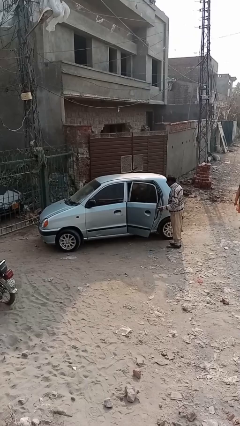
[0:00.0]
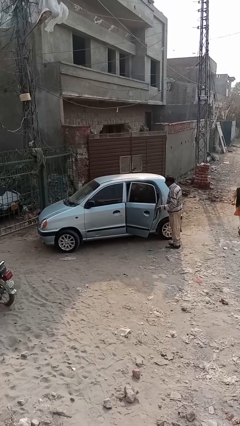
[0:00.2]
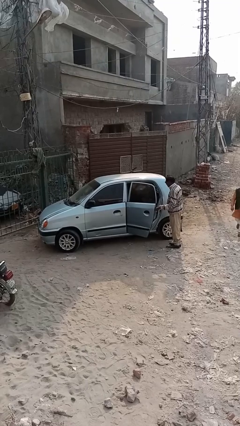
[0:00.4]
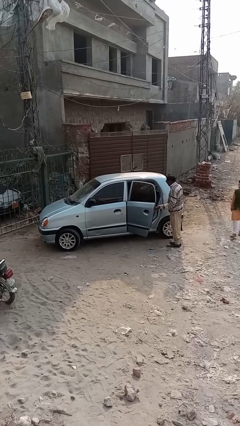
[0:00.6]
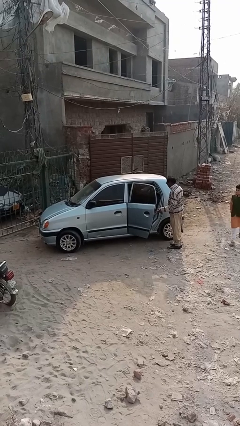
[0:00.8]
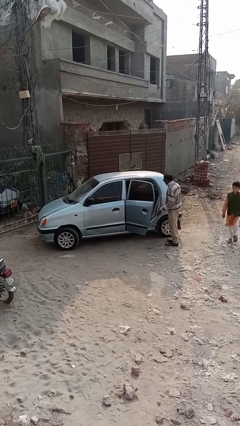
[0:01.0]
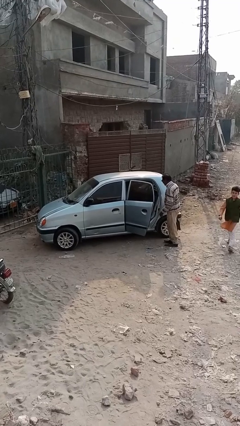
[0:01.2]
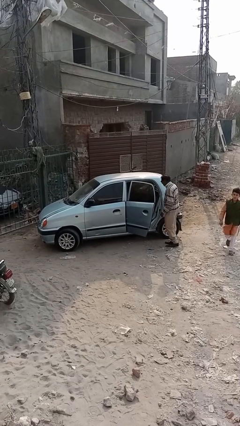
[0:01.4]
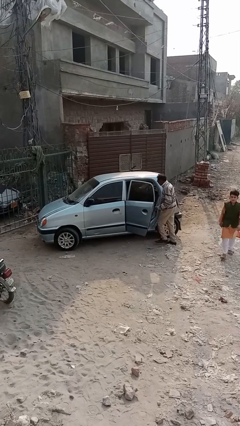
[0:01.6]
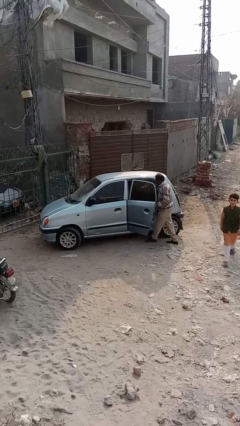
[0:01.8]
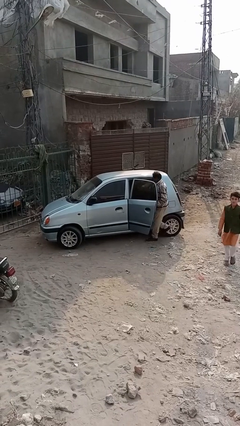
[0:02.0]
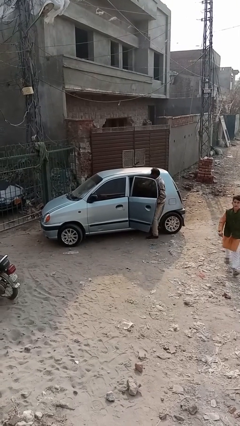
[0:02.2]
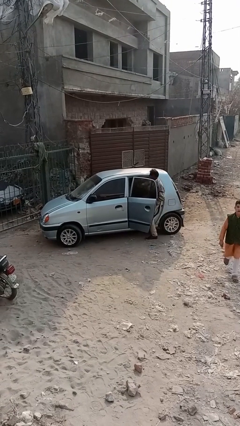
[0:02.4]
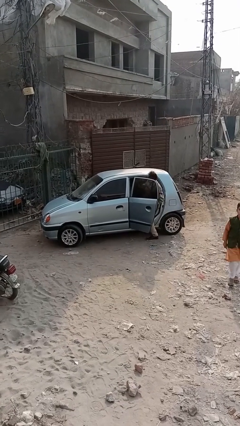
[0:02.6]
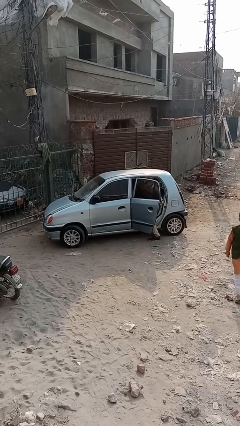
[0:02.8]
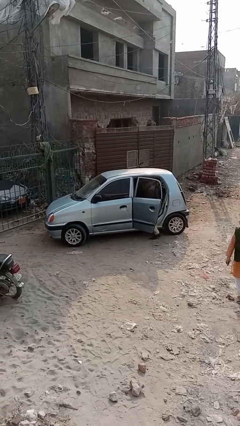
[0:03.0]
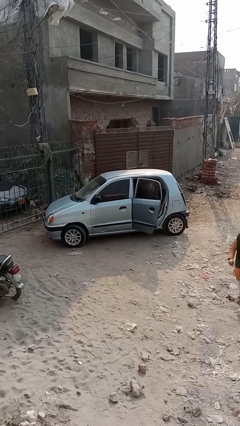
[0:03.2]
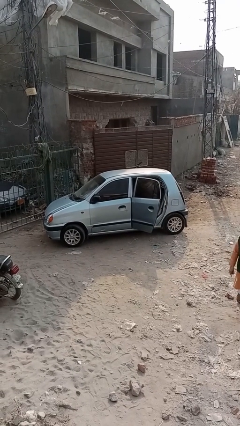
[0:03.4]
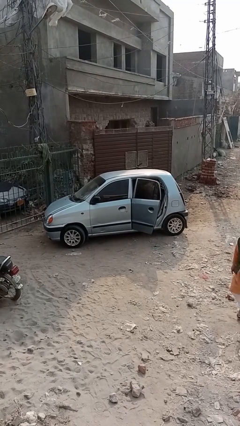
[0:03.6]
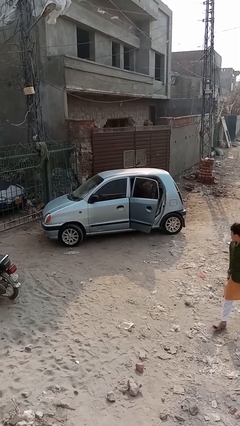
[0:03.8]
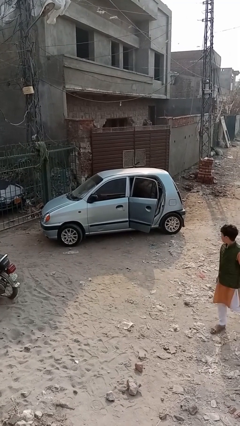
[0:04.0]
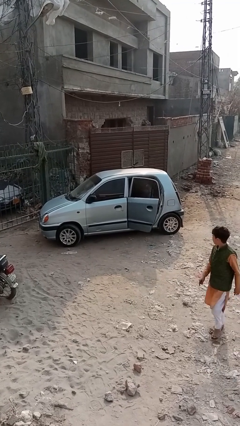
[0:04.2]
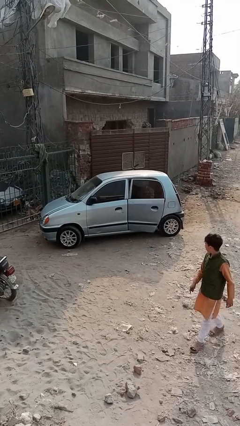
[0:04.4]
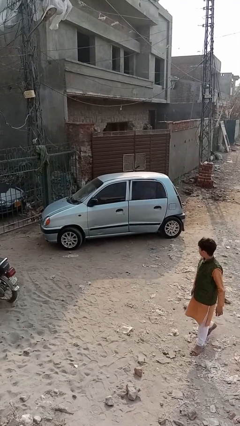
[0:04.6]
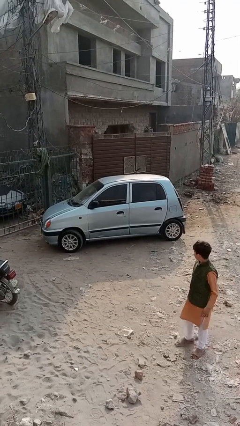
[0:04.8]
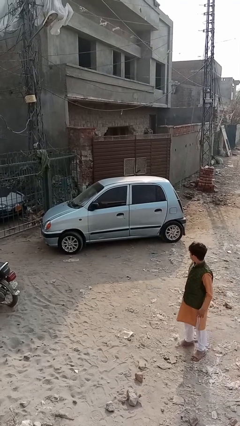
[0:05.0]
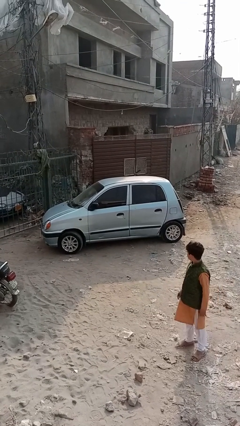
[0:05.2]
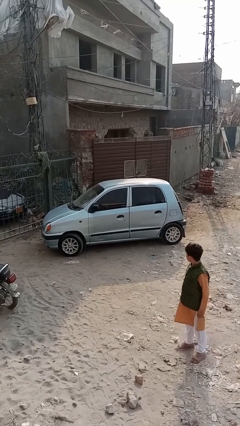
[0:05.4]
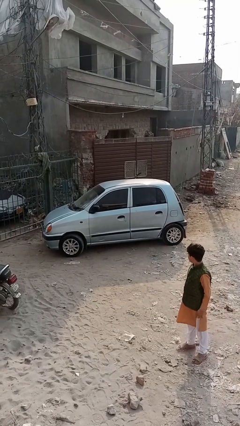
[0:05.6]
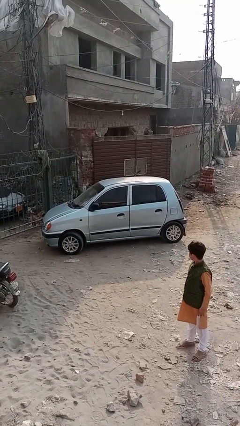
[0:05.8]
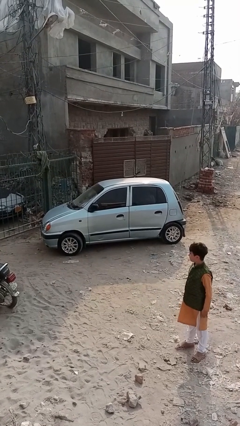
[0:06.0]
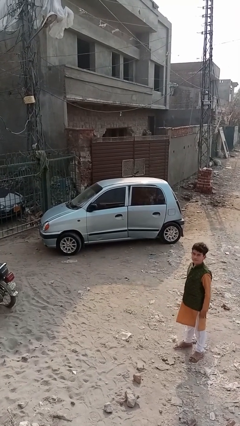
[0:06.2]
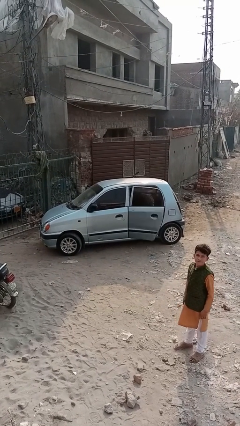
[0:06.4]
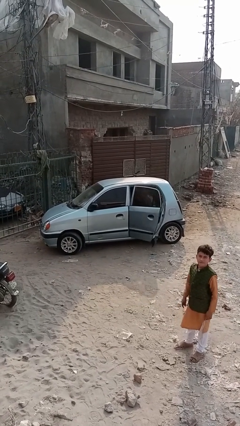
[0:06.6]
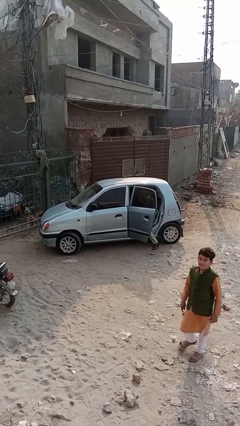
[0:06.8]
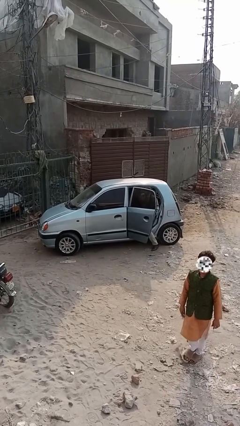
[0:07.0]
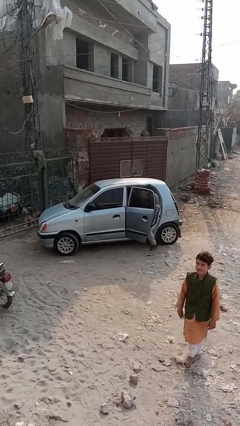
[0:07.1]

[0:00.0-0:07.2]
car picks up person

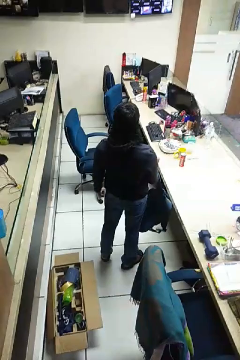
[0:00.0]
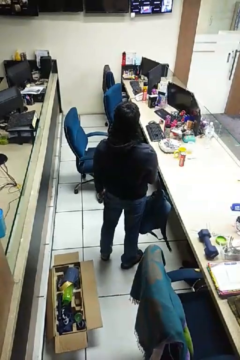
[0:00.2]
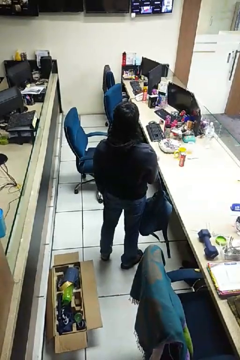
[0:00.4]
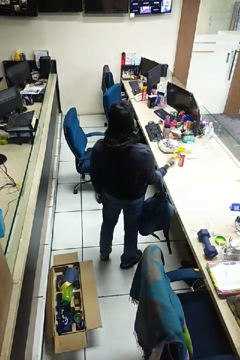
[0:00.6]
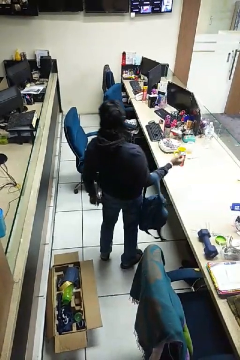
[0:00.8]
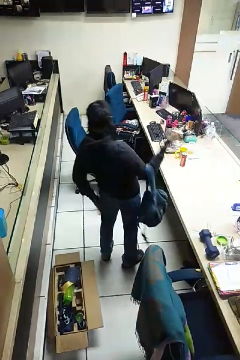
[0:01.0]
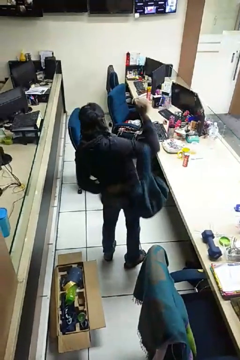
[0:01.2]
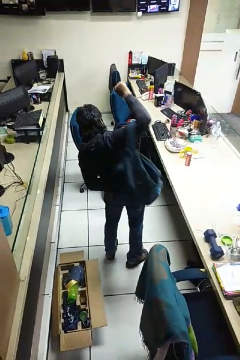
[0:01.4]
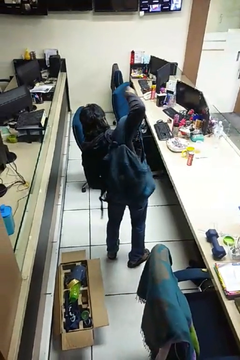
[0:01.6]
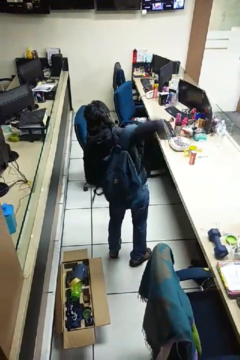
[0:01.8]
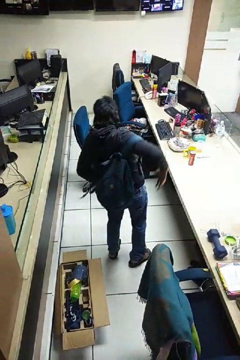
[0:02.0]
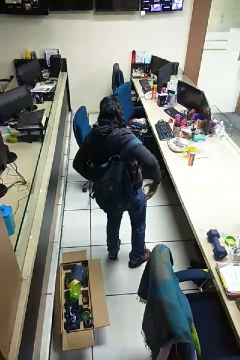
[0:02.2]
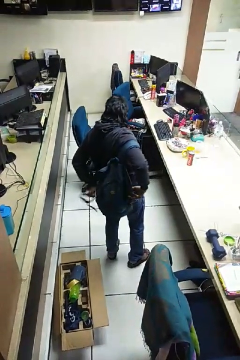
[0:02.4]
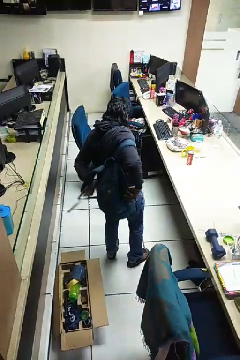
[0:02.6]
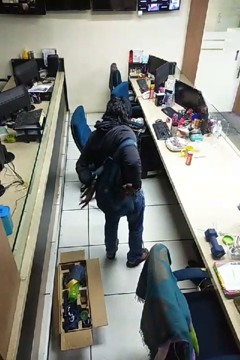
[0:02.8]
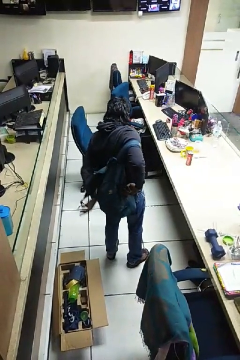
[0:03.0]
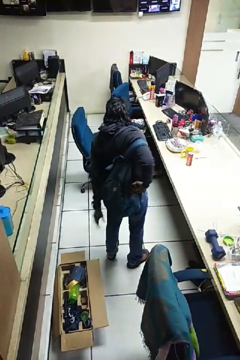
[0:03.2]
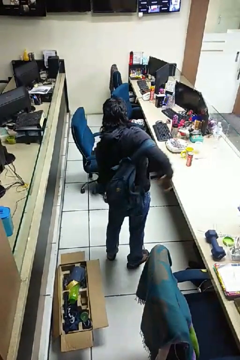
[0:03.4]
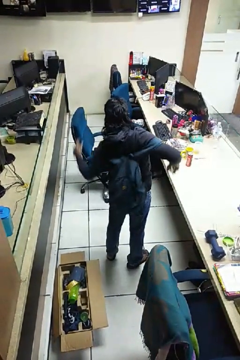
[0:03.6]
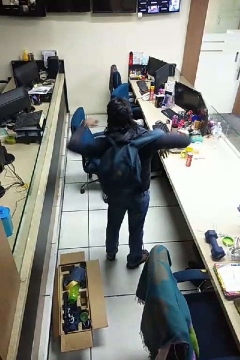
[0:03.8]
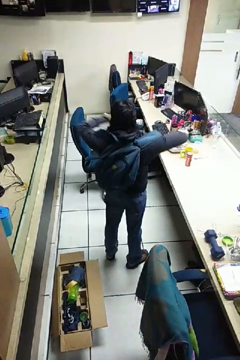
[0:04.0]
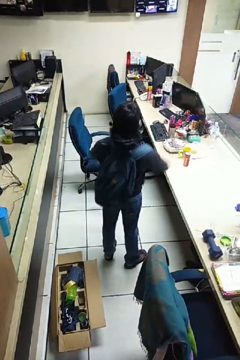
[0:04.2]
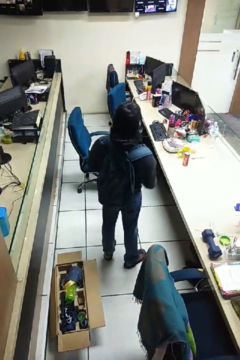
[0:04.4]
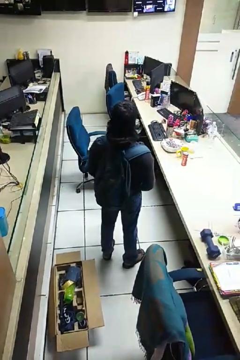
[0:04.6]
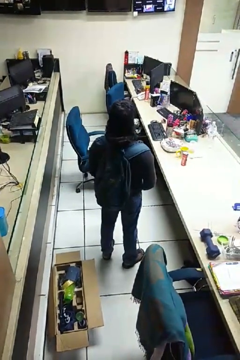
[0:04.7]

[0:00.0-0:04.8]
person puts on backpack

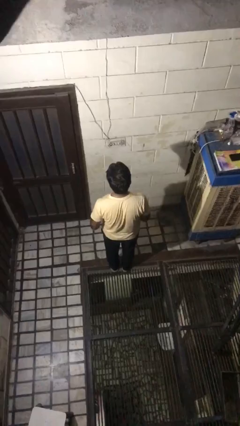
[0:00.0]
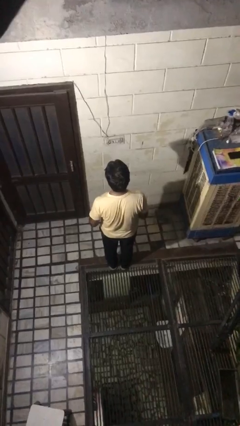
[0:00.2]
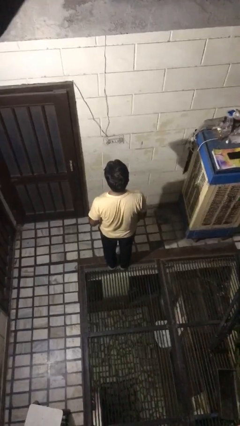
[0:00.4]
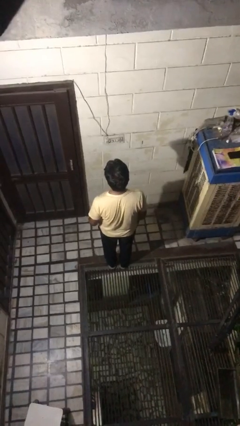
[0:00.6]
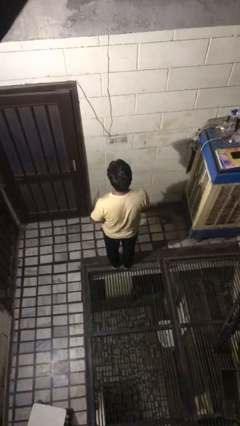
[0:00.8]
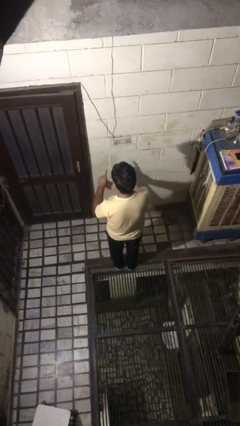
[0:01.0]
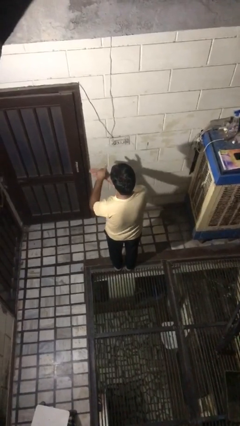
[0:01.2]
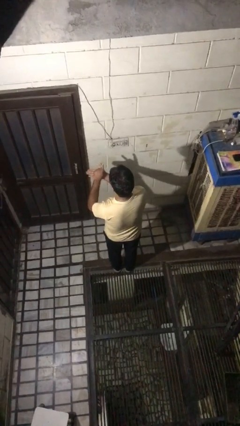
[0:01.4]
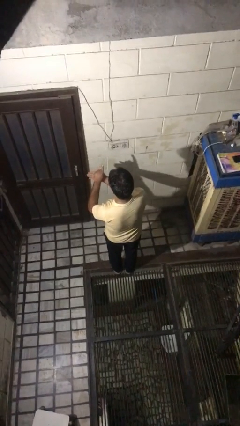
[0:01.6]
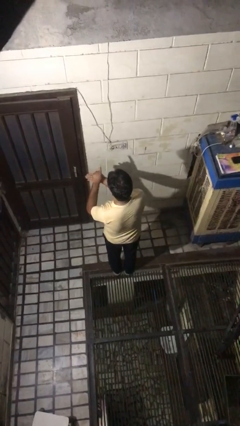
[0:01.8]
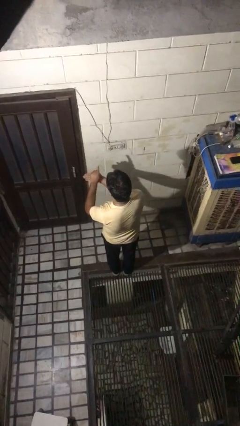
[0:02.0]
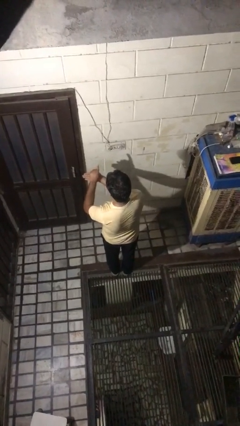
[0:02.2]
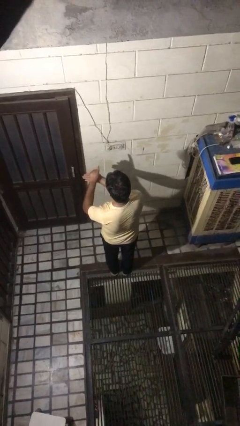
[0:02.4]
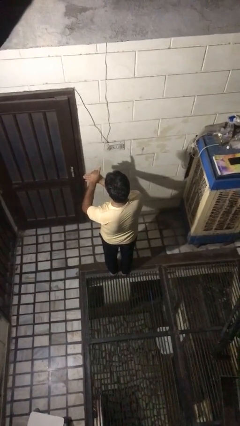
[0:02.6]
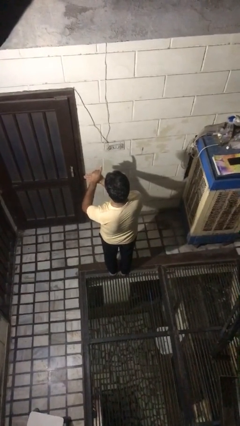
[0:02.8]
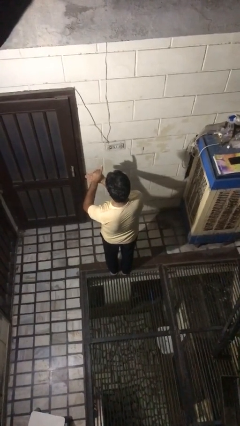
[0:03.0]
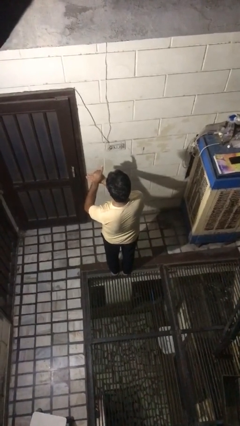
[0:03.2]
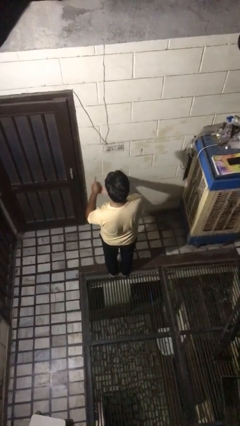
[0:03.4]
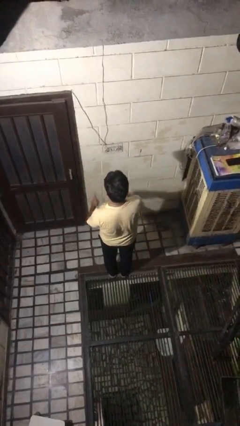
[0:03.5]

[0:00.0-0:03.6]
person gestures number one

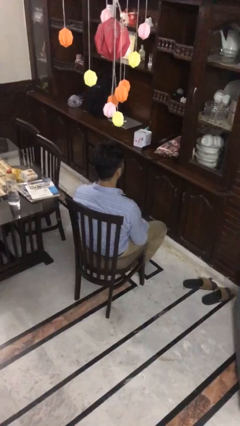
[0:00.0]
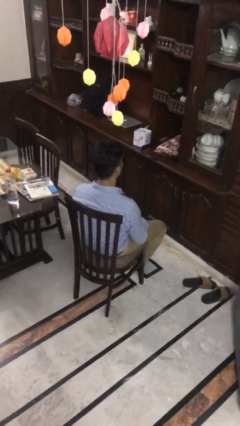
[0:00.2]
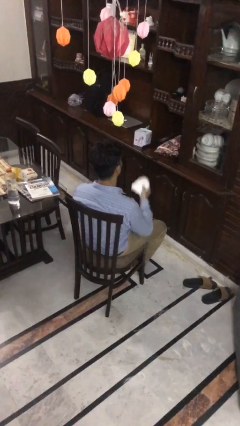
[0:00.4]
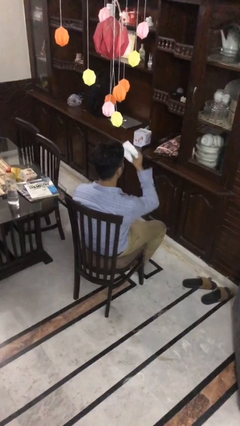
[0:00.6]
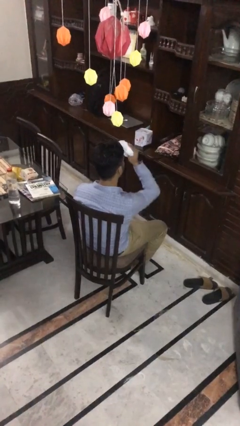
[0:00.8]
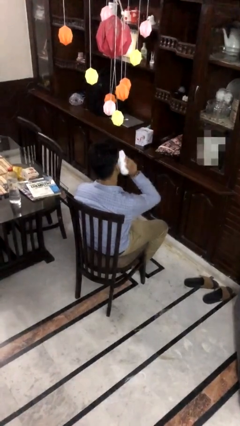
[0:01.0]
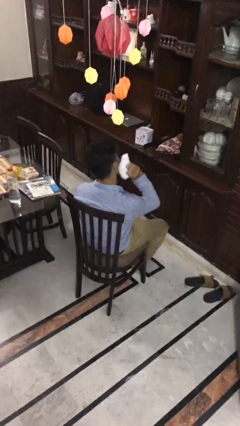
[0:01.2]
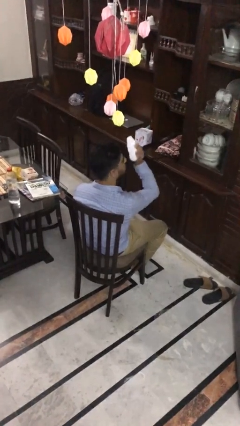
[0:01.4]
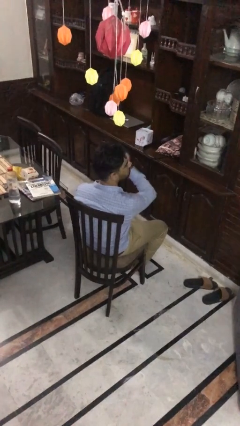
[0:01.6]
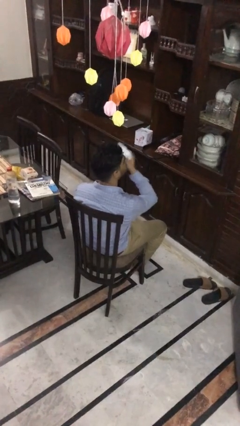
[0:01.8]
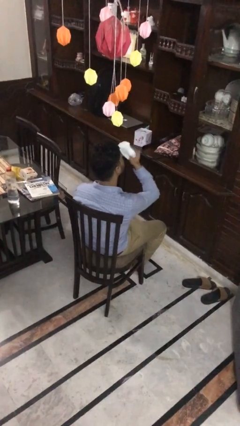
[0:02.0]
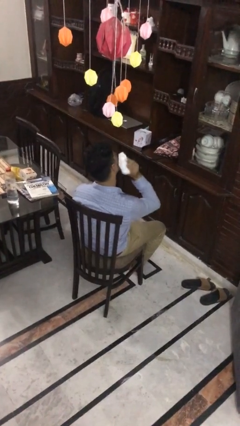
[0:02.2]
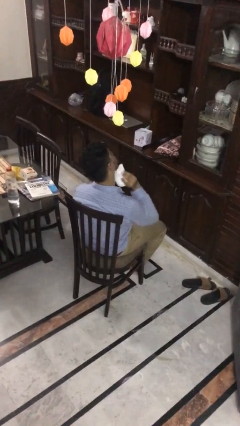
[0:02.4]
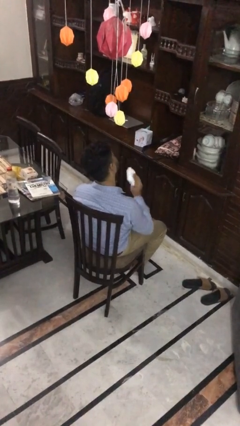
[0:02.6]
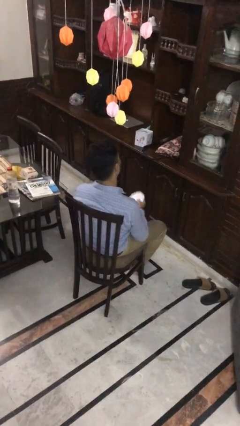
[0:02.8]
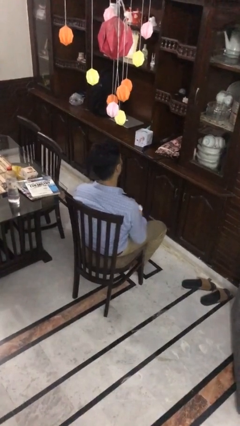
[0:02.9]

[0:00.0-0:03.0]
person wipes mouth with napkin
